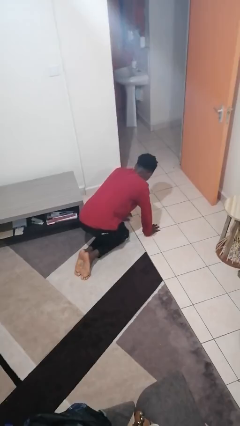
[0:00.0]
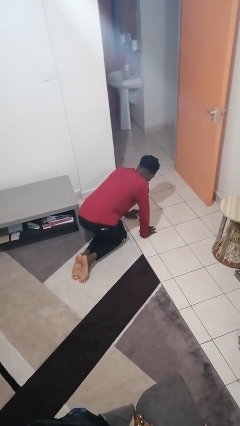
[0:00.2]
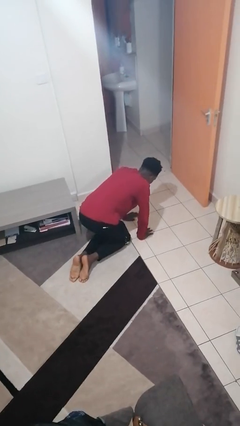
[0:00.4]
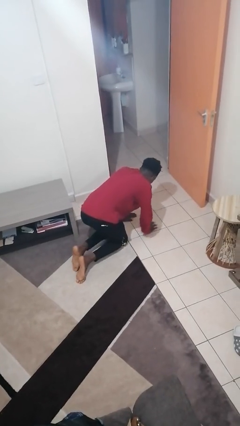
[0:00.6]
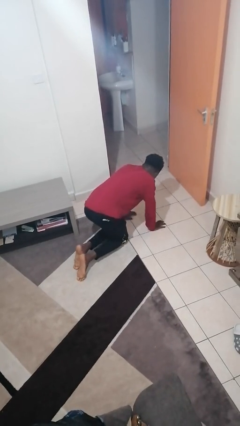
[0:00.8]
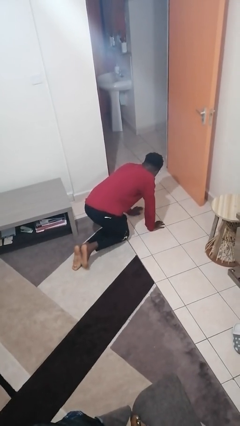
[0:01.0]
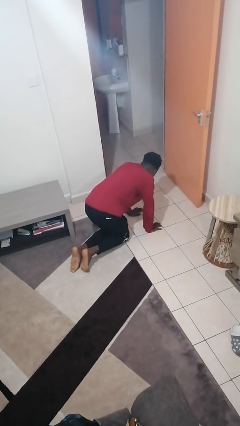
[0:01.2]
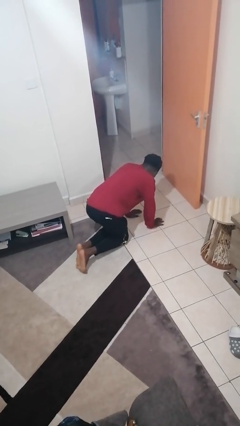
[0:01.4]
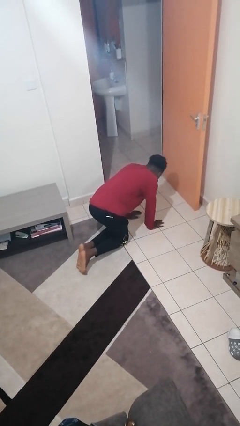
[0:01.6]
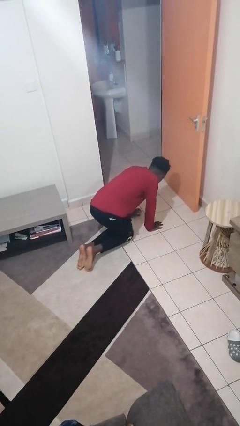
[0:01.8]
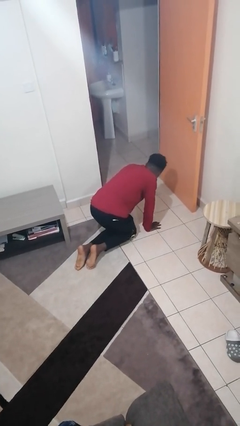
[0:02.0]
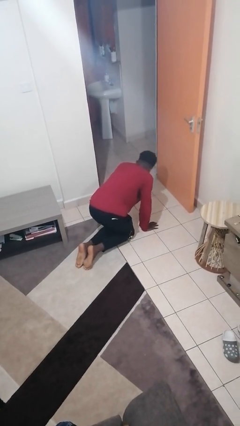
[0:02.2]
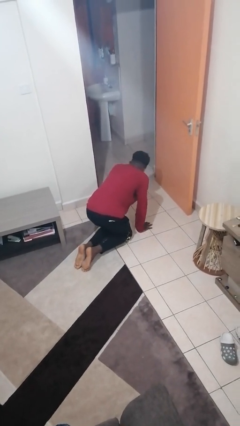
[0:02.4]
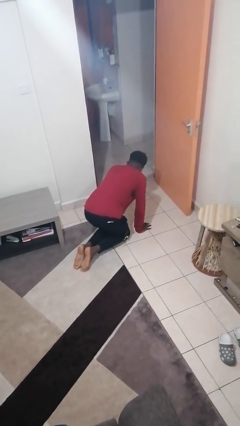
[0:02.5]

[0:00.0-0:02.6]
person crawls

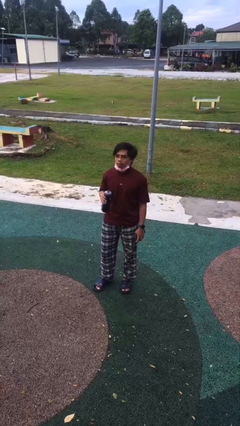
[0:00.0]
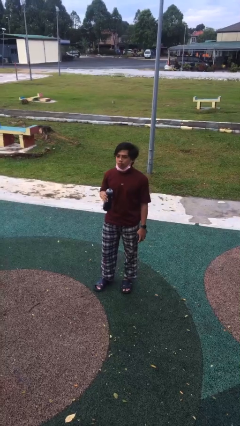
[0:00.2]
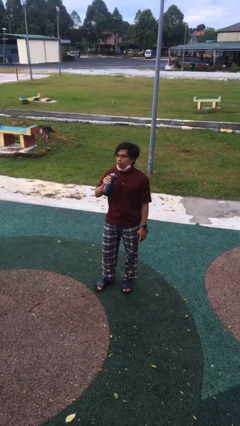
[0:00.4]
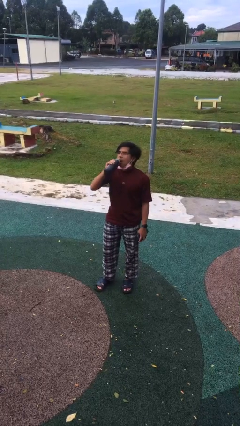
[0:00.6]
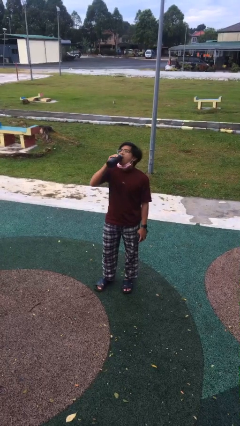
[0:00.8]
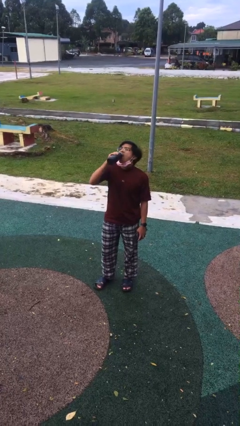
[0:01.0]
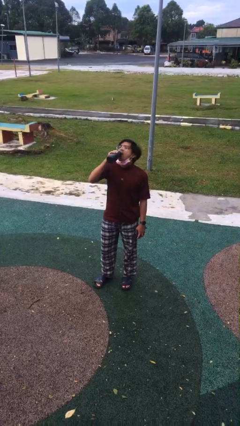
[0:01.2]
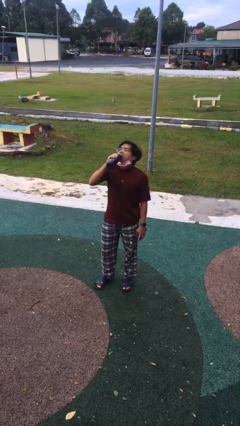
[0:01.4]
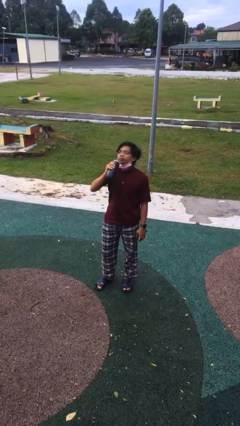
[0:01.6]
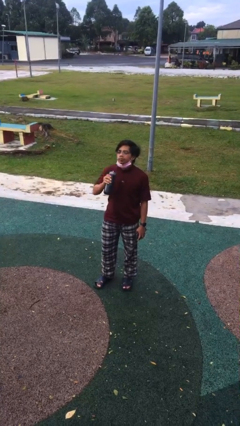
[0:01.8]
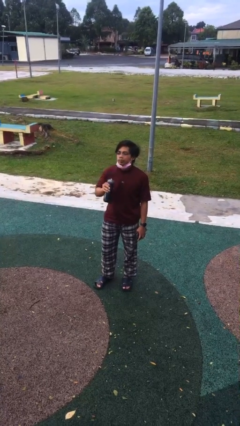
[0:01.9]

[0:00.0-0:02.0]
person drinks from bottle

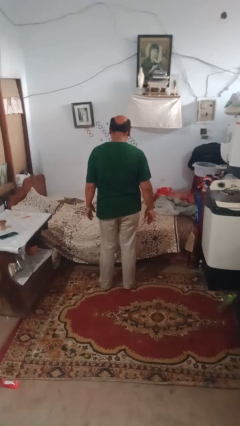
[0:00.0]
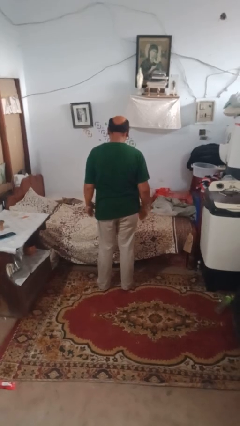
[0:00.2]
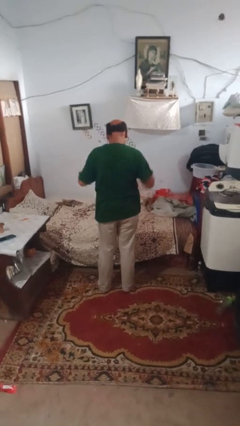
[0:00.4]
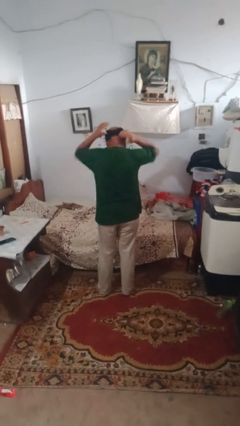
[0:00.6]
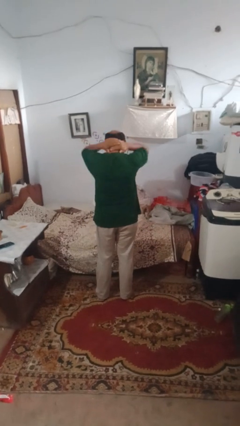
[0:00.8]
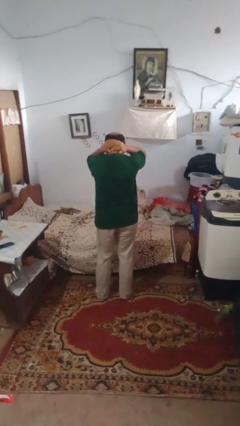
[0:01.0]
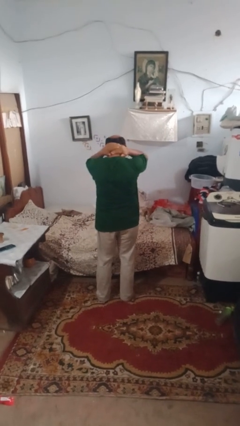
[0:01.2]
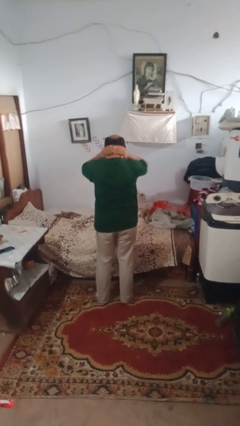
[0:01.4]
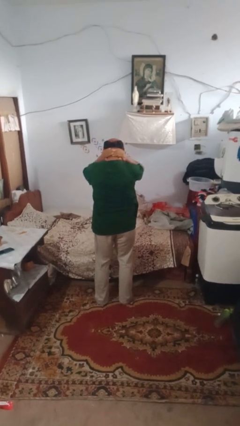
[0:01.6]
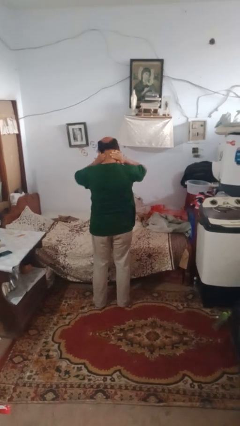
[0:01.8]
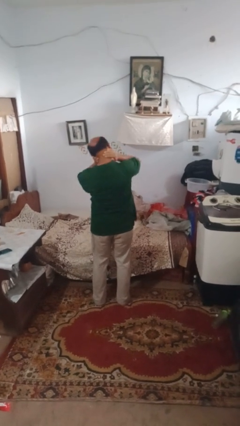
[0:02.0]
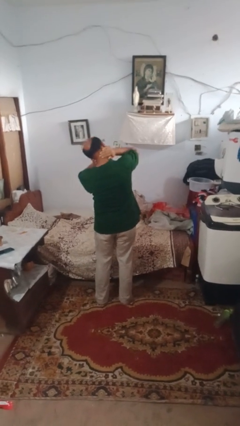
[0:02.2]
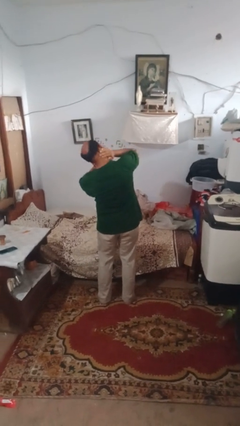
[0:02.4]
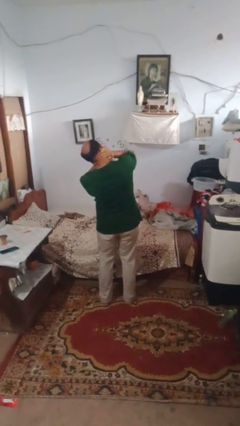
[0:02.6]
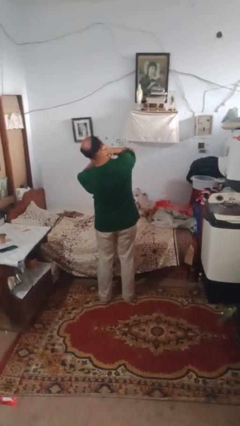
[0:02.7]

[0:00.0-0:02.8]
person rubs neck

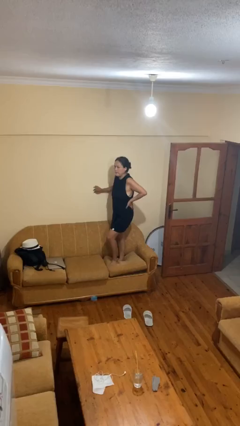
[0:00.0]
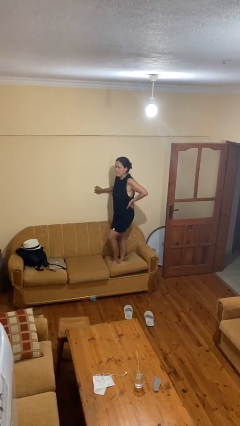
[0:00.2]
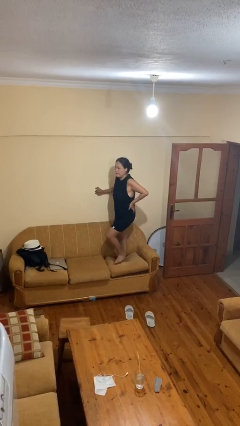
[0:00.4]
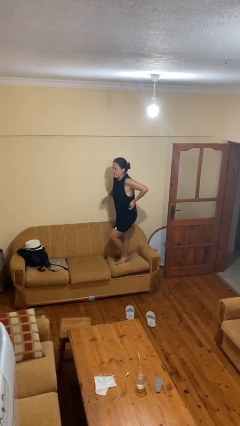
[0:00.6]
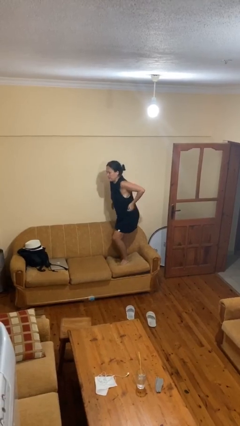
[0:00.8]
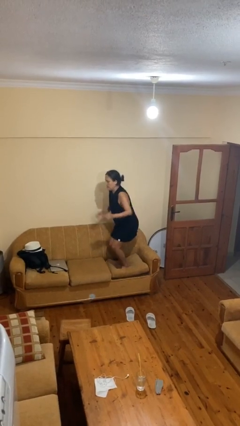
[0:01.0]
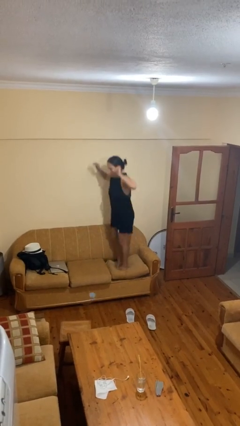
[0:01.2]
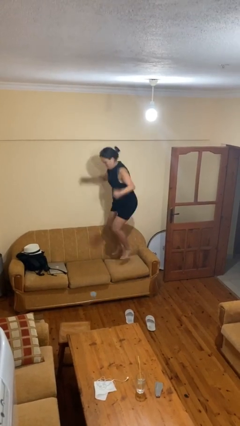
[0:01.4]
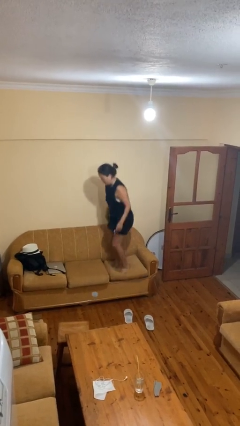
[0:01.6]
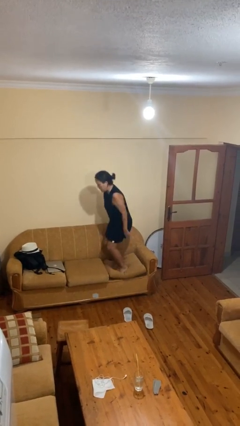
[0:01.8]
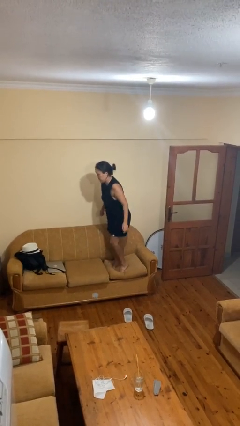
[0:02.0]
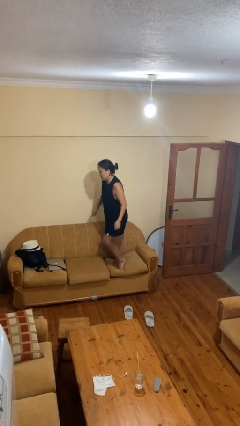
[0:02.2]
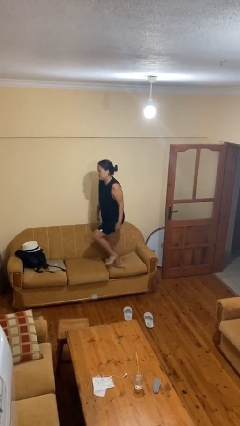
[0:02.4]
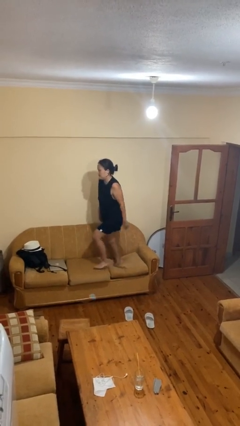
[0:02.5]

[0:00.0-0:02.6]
person jumps on couch

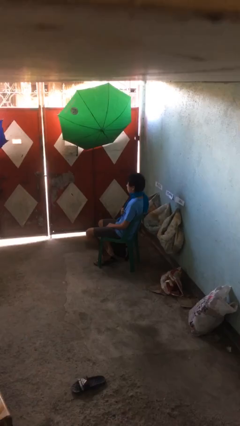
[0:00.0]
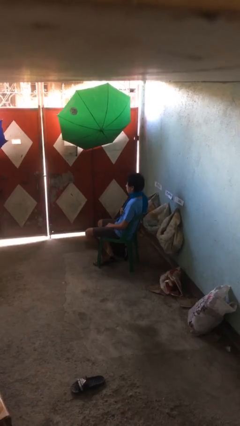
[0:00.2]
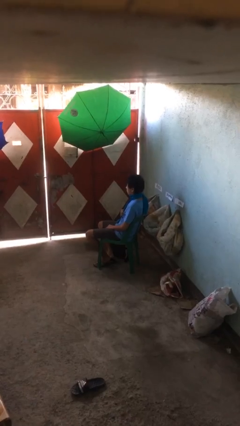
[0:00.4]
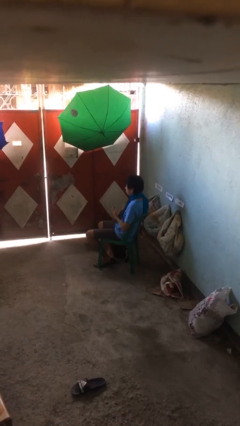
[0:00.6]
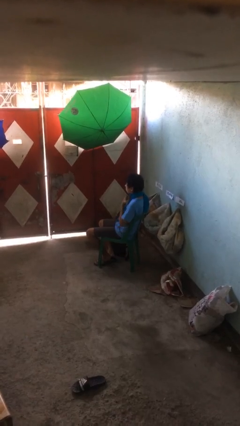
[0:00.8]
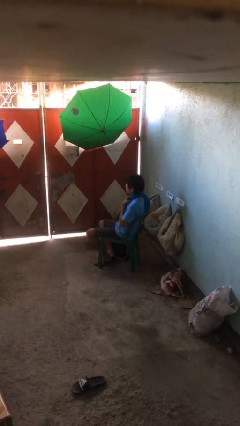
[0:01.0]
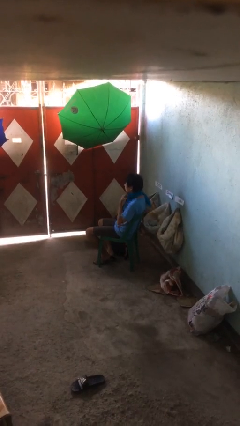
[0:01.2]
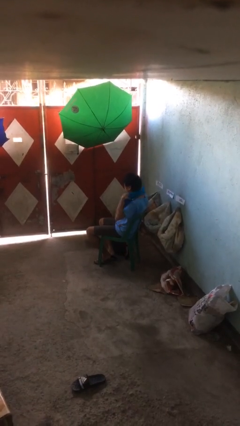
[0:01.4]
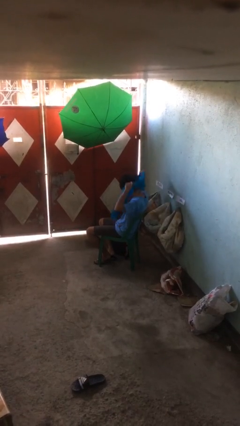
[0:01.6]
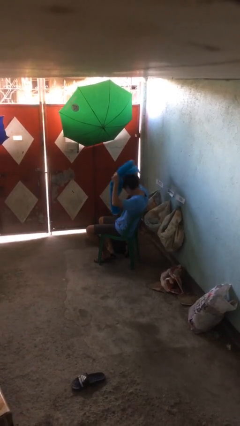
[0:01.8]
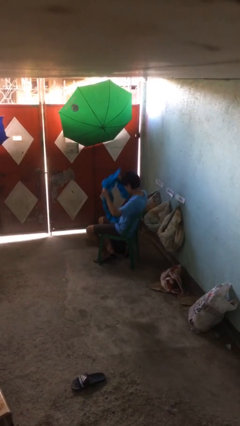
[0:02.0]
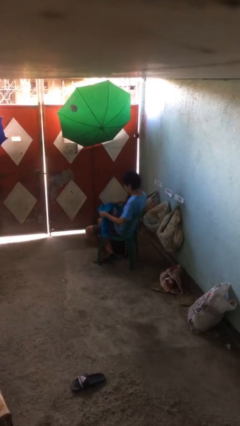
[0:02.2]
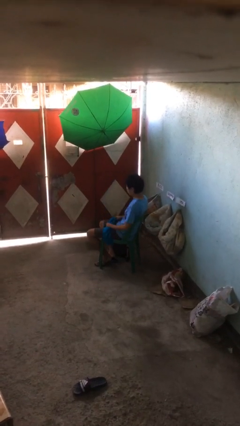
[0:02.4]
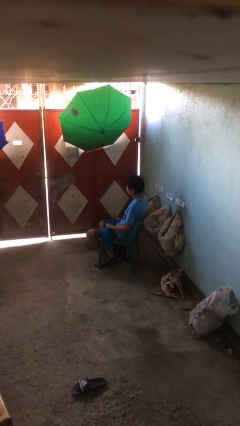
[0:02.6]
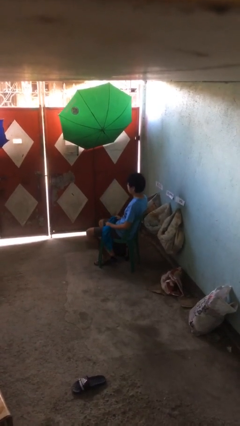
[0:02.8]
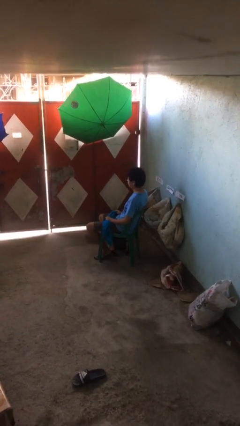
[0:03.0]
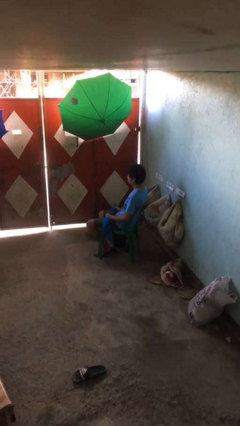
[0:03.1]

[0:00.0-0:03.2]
person takes off scarf

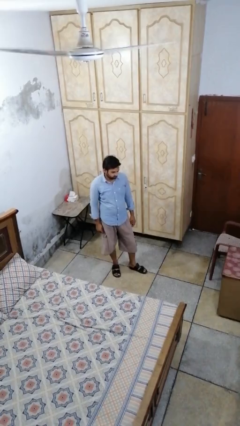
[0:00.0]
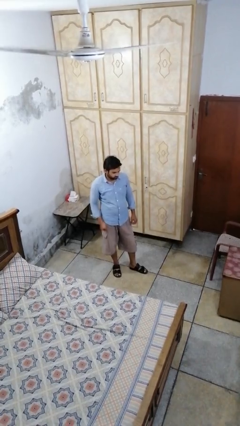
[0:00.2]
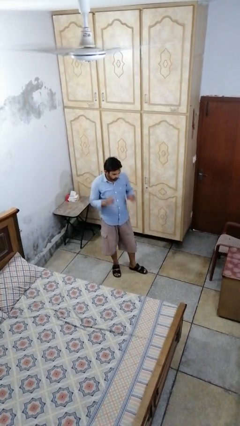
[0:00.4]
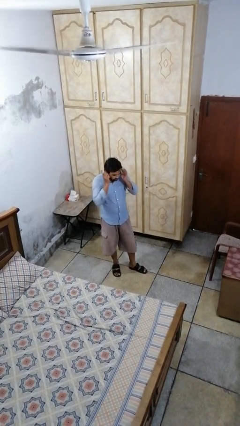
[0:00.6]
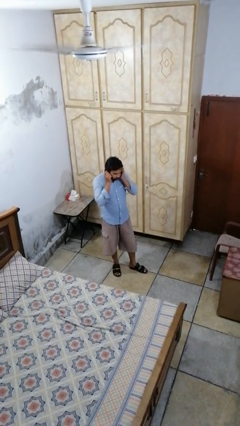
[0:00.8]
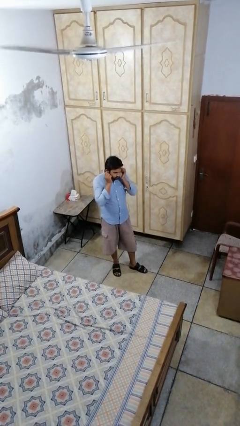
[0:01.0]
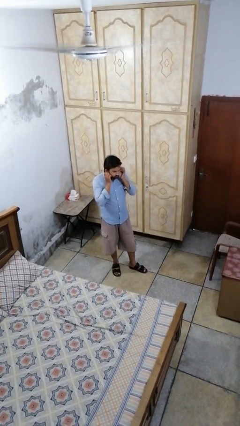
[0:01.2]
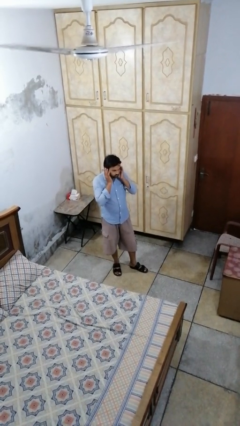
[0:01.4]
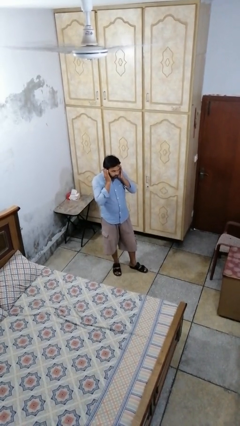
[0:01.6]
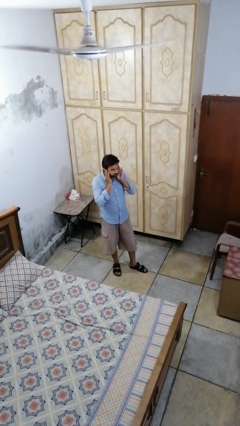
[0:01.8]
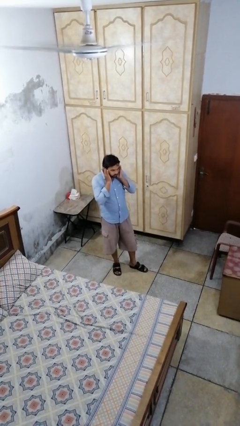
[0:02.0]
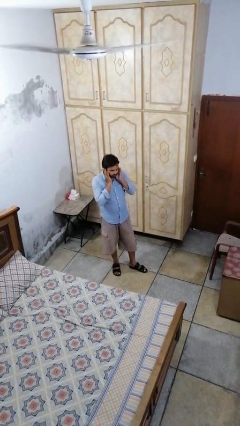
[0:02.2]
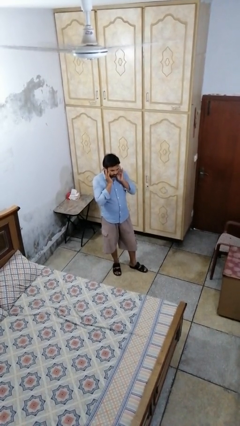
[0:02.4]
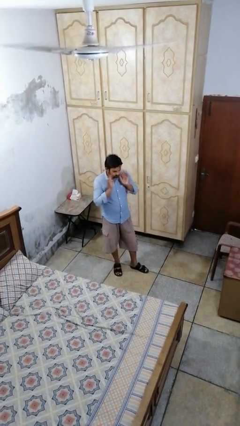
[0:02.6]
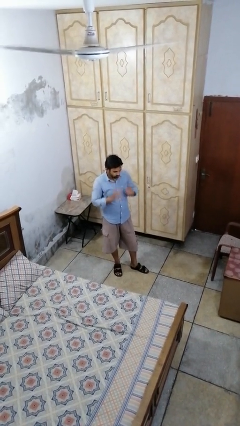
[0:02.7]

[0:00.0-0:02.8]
person touches earlobe

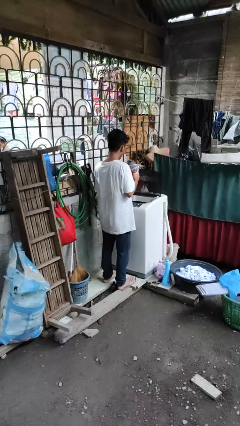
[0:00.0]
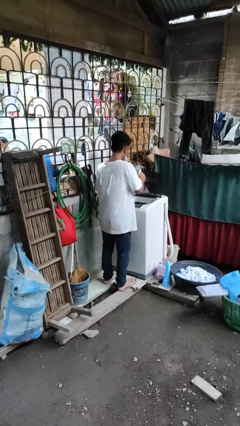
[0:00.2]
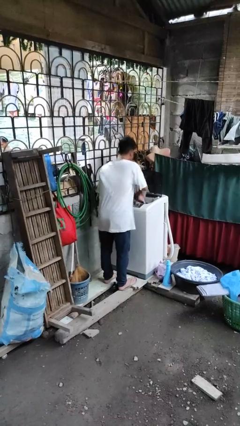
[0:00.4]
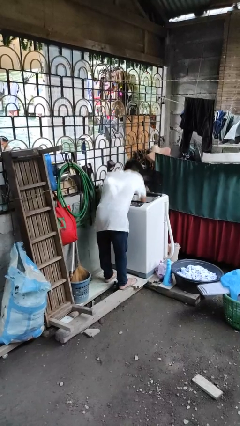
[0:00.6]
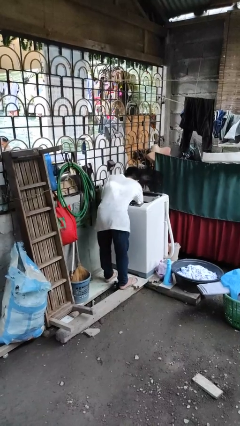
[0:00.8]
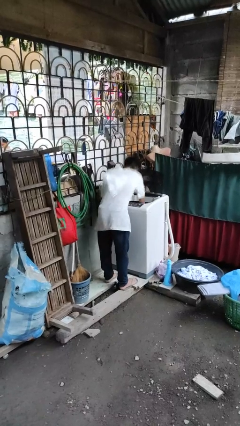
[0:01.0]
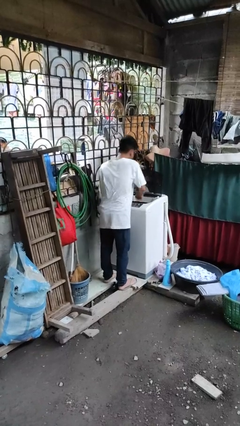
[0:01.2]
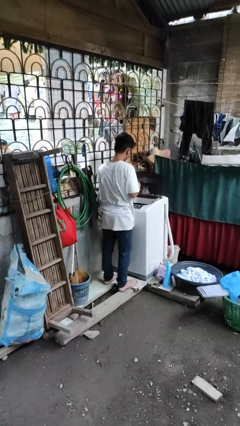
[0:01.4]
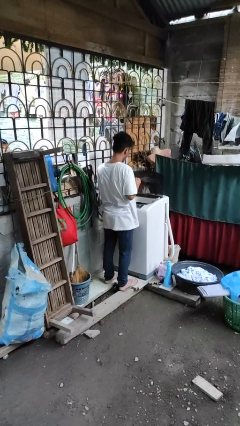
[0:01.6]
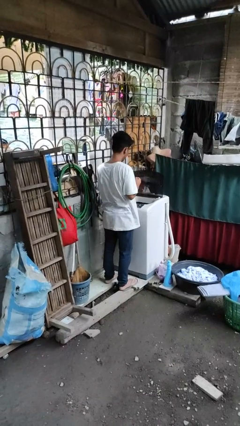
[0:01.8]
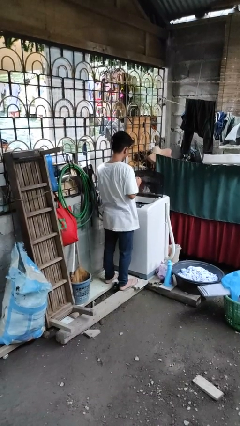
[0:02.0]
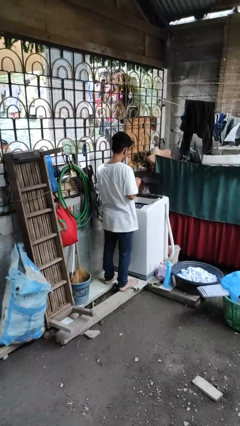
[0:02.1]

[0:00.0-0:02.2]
person loads dryer
